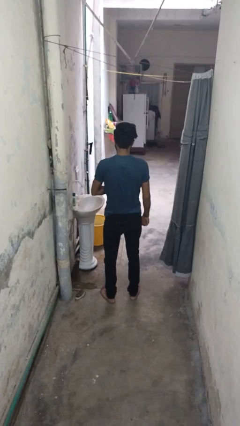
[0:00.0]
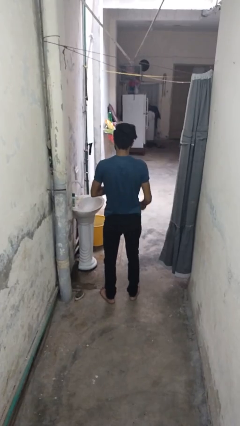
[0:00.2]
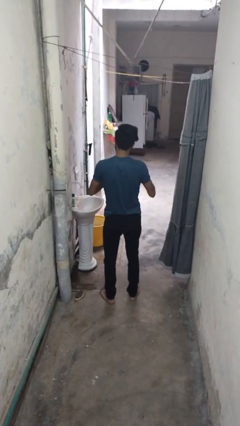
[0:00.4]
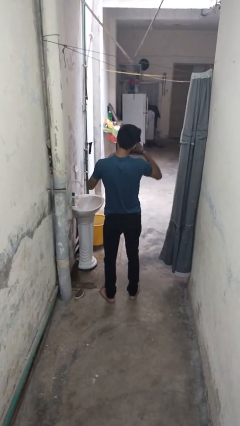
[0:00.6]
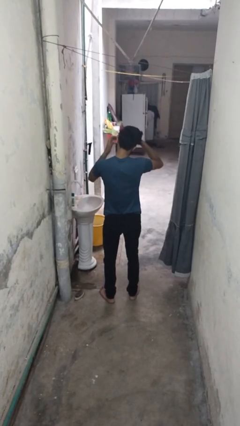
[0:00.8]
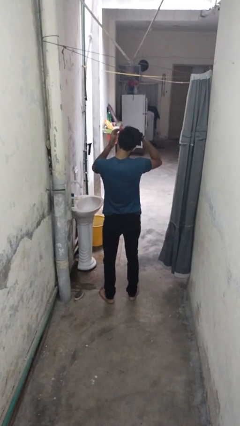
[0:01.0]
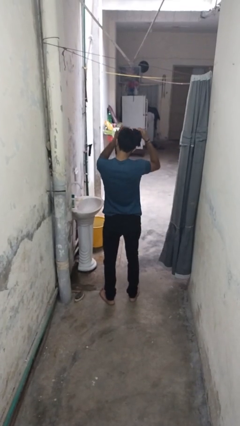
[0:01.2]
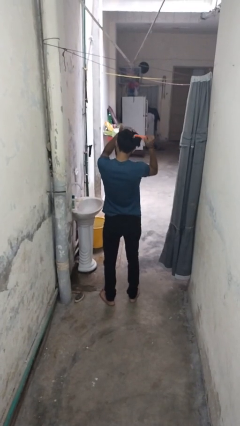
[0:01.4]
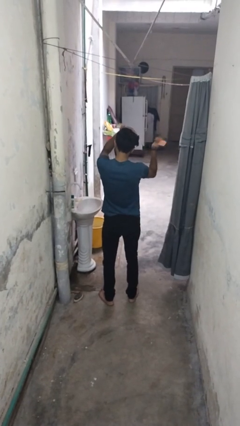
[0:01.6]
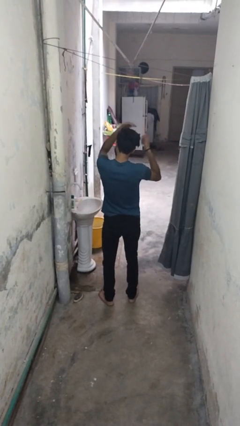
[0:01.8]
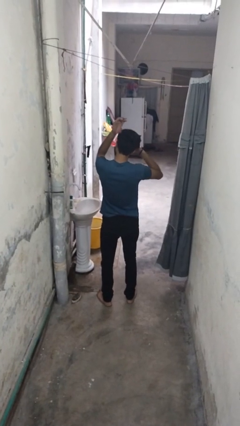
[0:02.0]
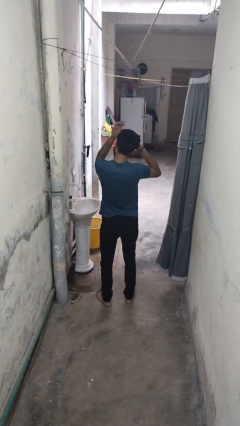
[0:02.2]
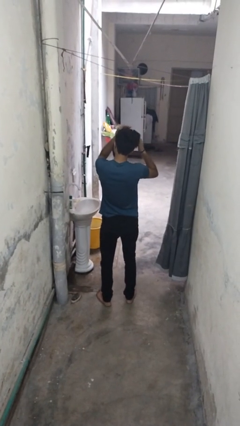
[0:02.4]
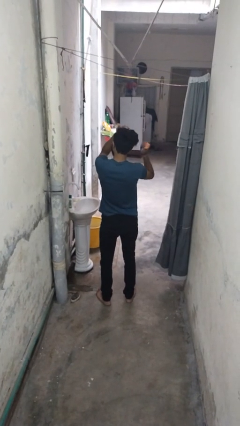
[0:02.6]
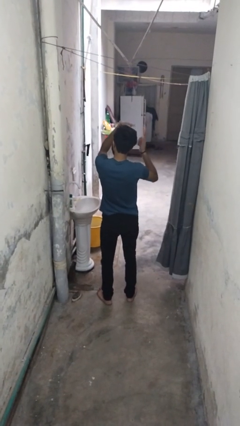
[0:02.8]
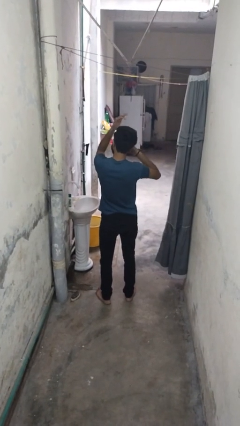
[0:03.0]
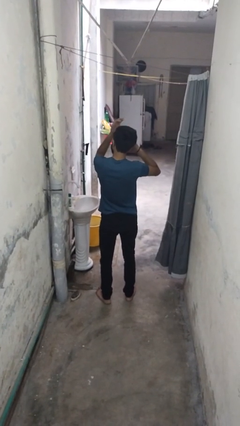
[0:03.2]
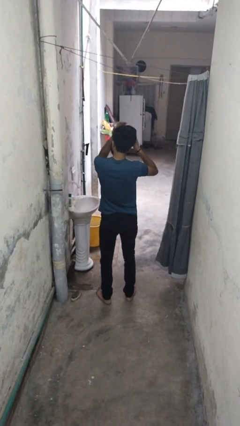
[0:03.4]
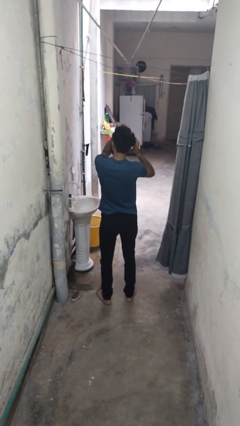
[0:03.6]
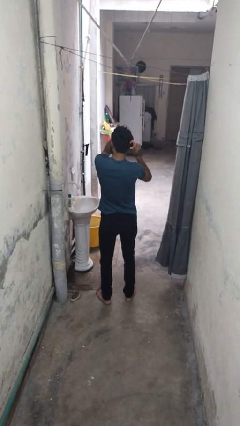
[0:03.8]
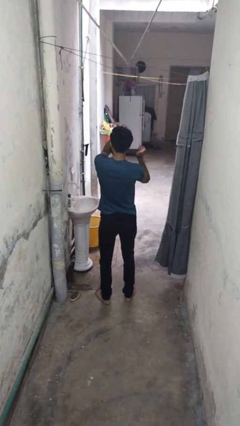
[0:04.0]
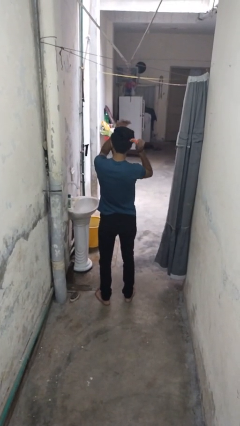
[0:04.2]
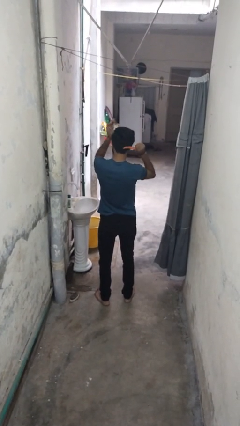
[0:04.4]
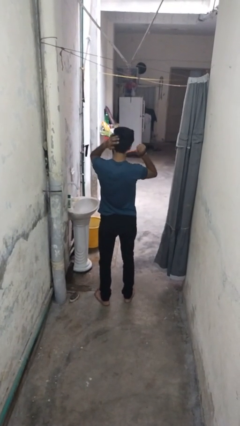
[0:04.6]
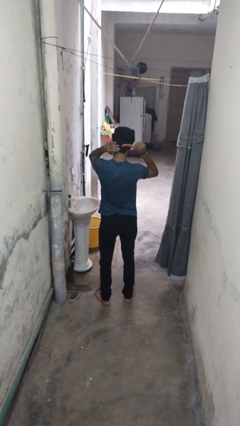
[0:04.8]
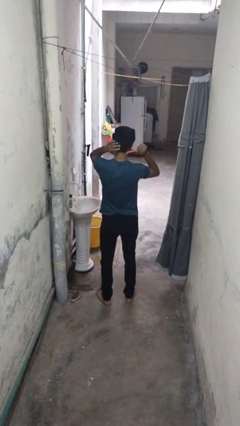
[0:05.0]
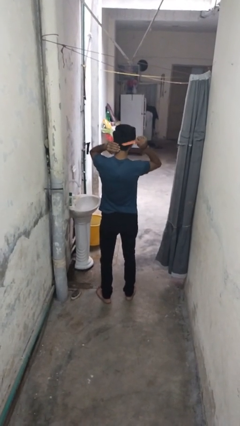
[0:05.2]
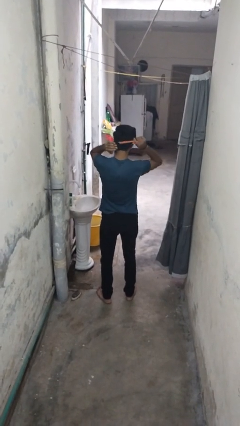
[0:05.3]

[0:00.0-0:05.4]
person brushes hair

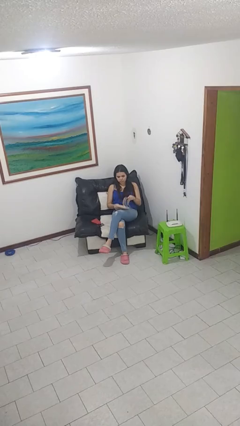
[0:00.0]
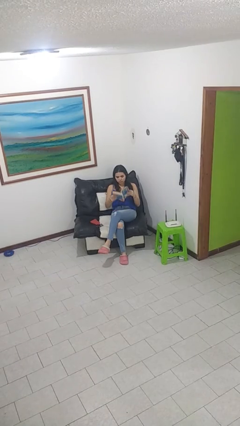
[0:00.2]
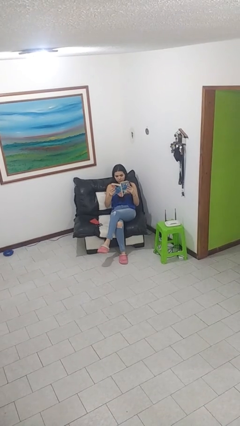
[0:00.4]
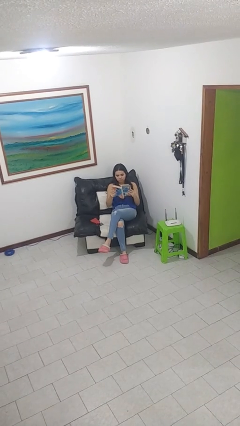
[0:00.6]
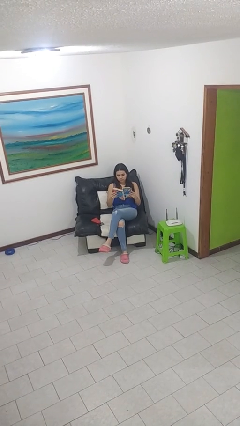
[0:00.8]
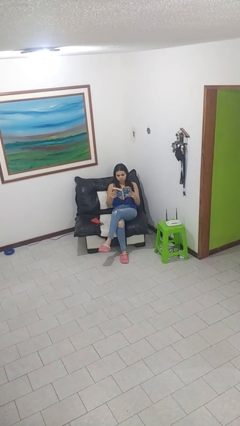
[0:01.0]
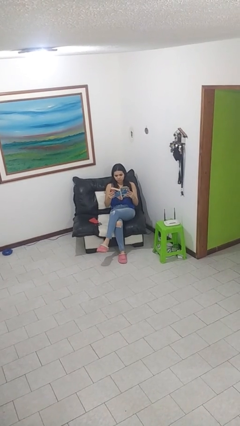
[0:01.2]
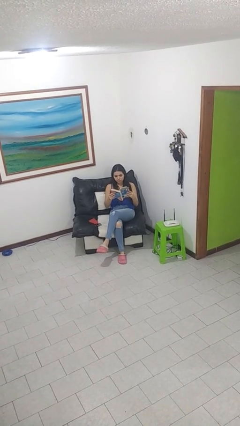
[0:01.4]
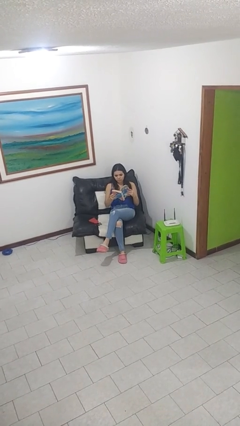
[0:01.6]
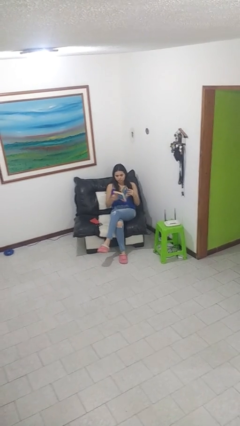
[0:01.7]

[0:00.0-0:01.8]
person reads book

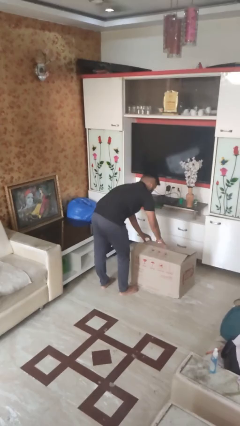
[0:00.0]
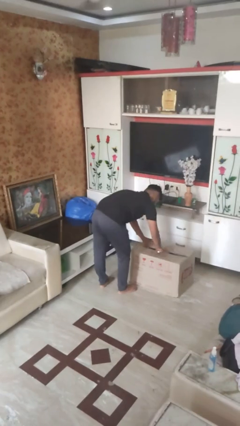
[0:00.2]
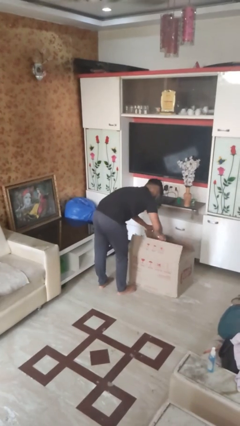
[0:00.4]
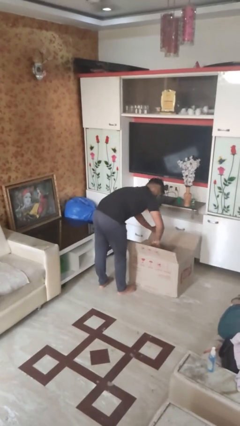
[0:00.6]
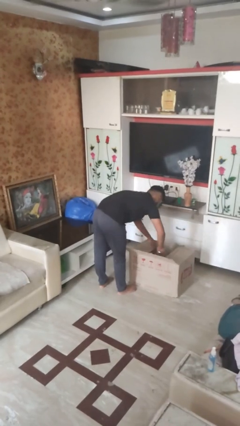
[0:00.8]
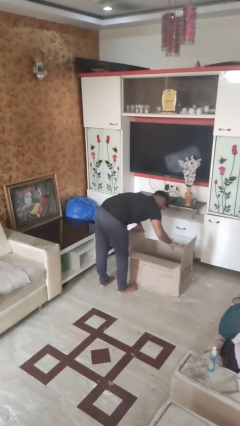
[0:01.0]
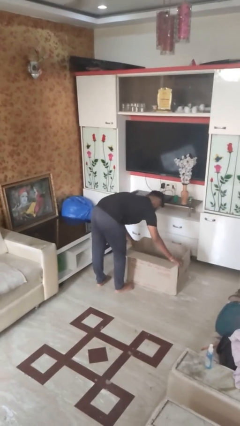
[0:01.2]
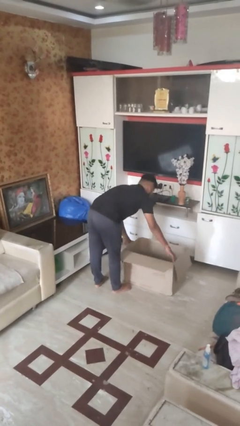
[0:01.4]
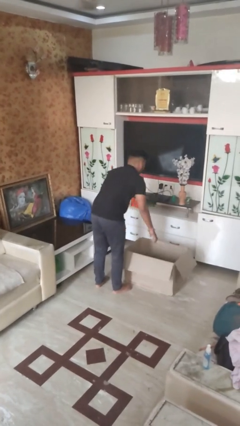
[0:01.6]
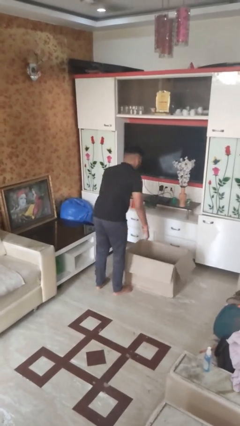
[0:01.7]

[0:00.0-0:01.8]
person opens box

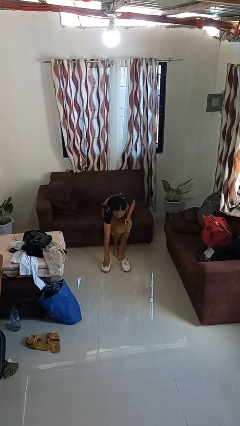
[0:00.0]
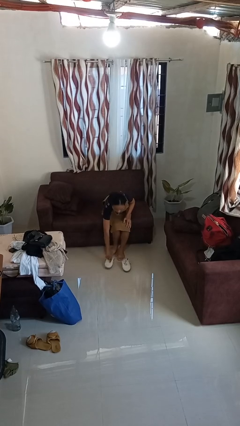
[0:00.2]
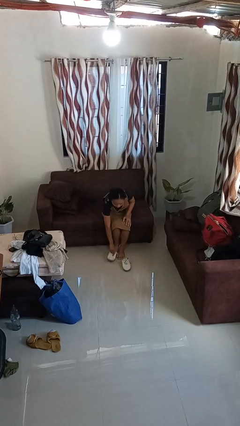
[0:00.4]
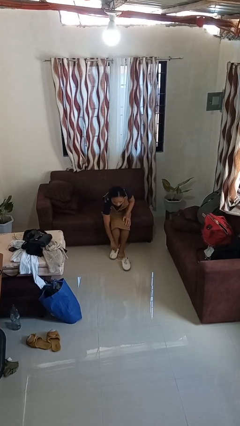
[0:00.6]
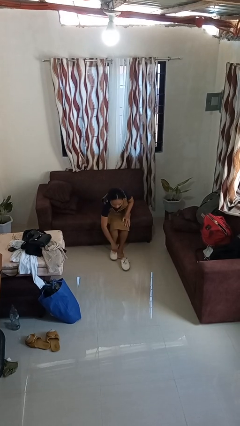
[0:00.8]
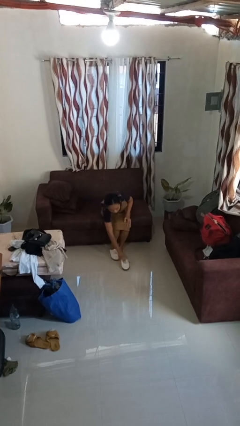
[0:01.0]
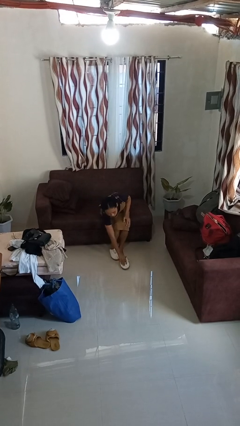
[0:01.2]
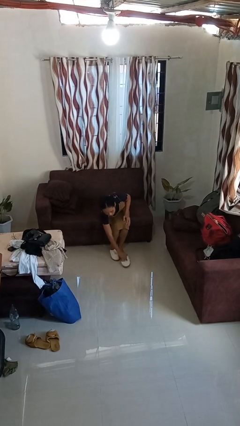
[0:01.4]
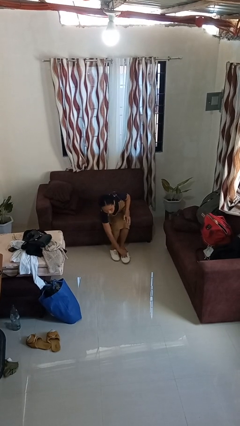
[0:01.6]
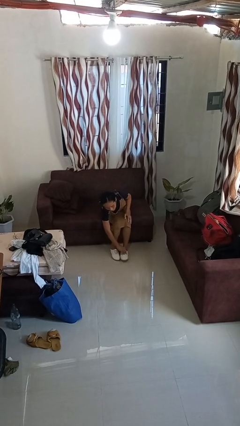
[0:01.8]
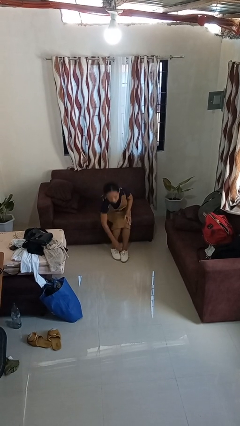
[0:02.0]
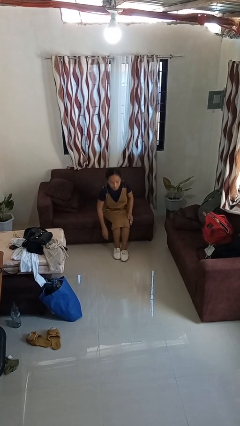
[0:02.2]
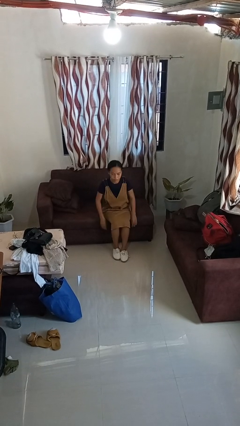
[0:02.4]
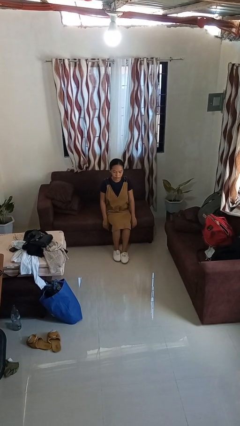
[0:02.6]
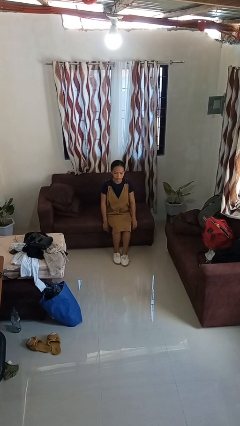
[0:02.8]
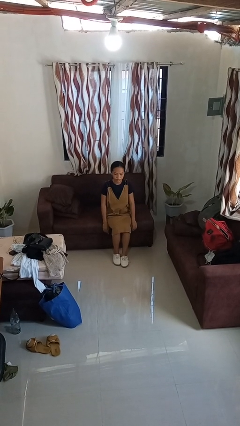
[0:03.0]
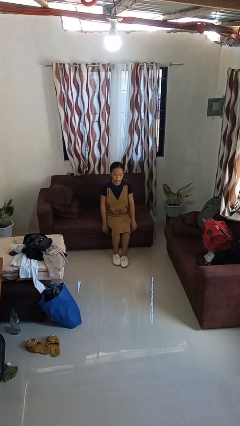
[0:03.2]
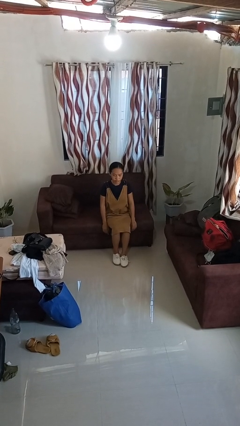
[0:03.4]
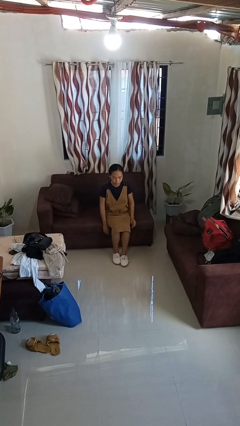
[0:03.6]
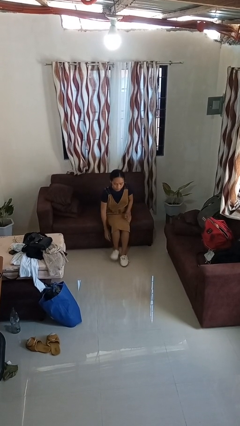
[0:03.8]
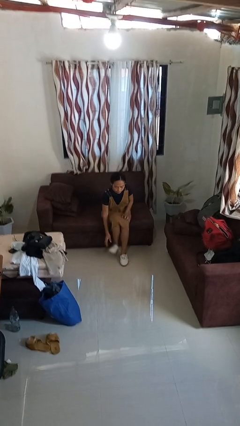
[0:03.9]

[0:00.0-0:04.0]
person puts on shoes

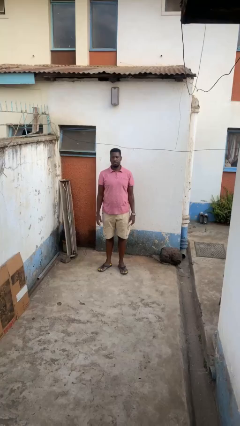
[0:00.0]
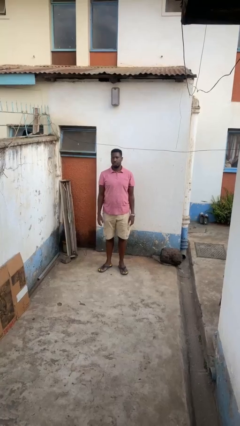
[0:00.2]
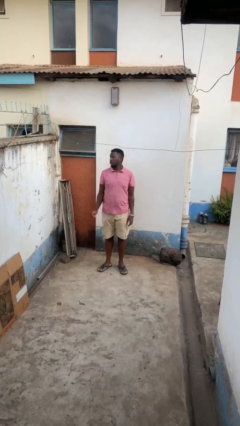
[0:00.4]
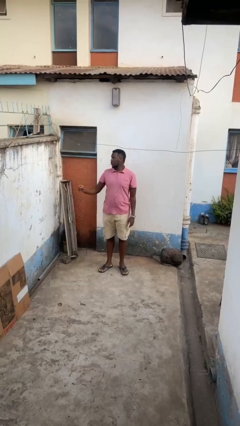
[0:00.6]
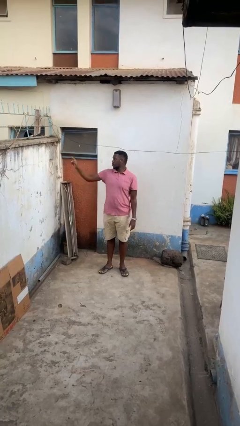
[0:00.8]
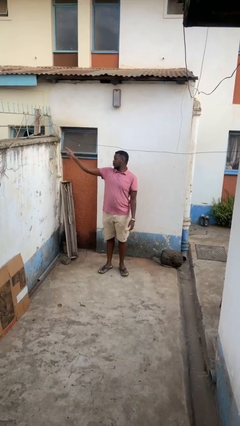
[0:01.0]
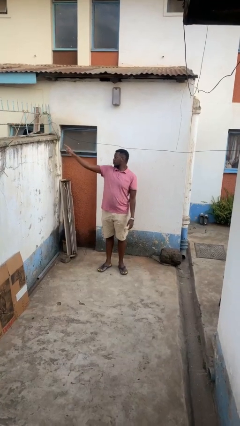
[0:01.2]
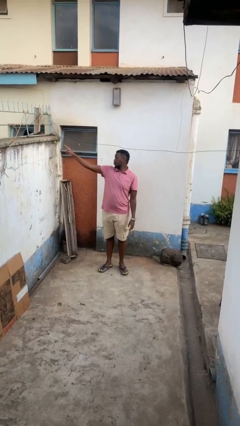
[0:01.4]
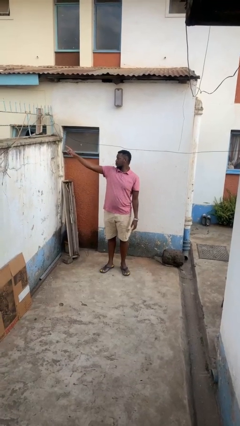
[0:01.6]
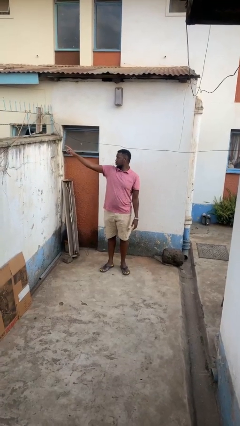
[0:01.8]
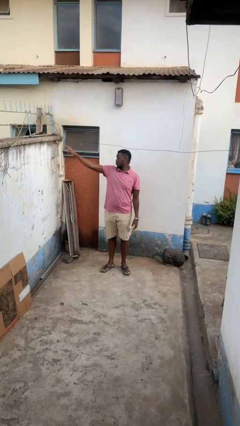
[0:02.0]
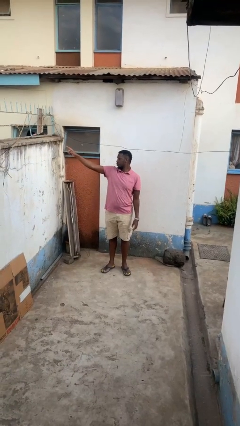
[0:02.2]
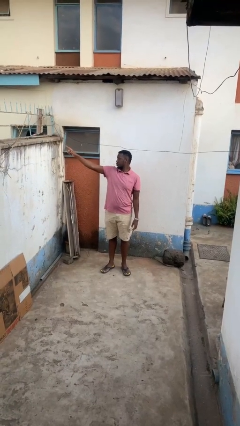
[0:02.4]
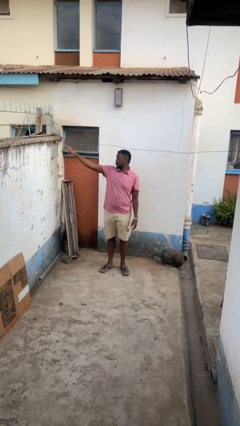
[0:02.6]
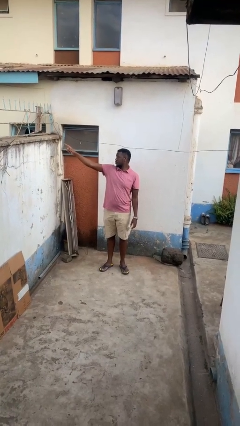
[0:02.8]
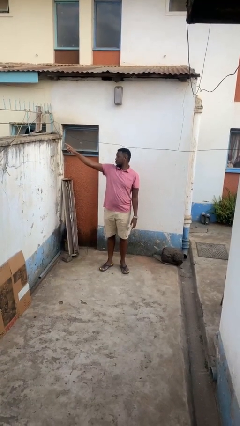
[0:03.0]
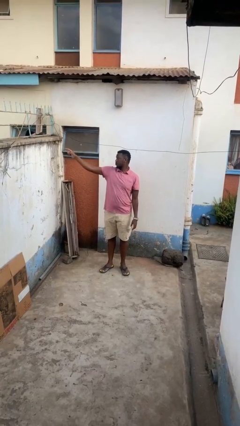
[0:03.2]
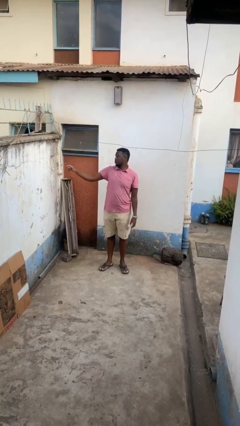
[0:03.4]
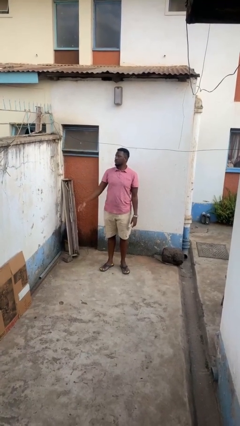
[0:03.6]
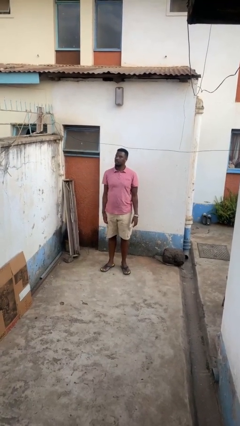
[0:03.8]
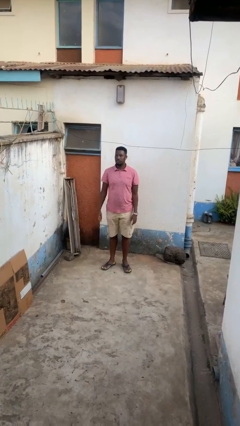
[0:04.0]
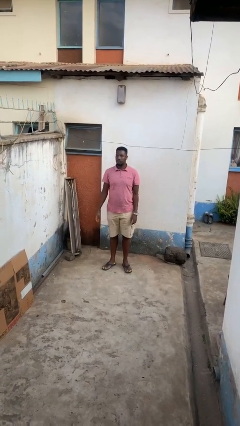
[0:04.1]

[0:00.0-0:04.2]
person points at person

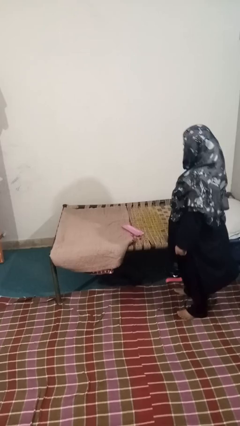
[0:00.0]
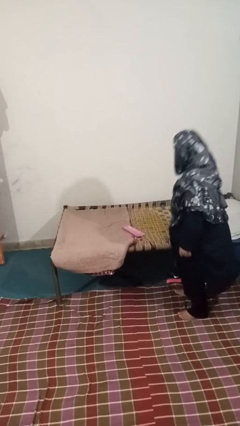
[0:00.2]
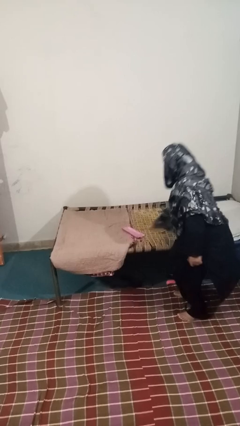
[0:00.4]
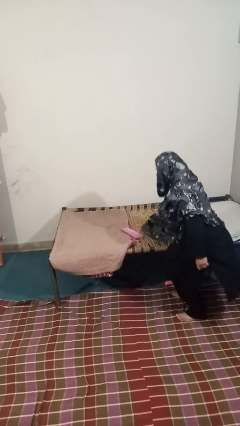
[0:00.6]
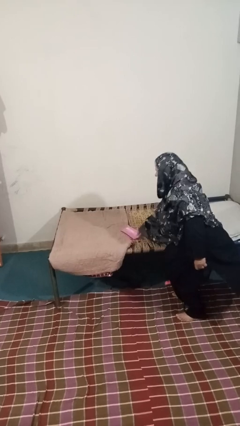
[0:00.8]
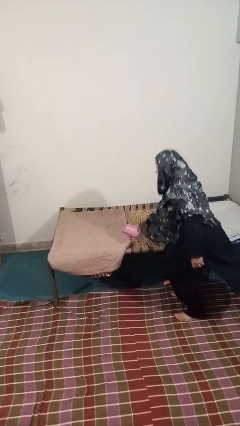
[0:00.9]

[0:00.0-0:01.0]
person puts down object on bed
